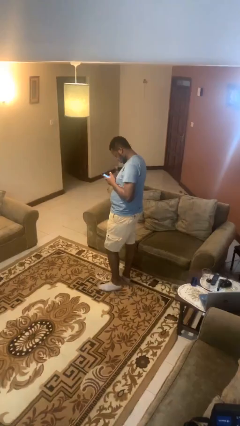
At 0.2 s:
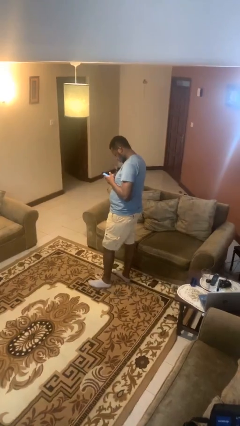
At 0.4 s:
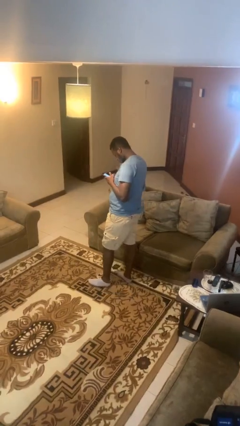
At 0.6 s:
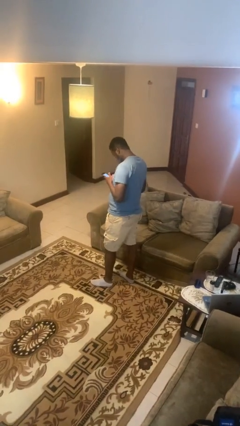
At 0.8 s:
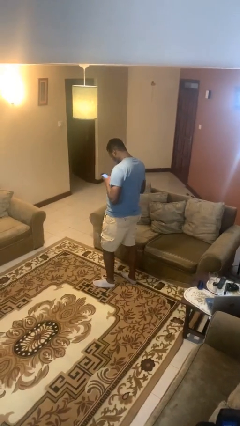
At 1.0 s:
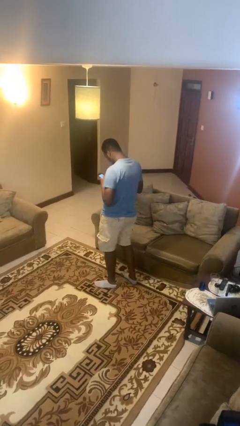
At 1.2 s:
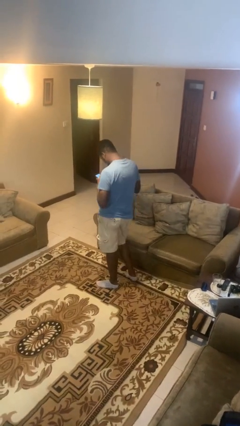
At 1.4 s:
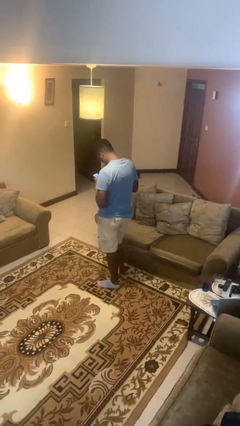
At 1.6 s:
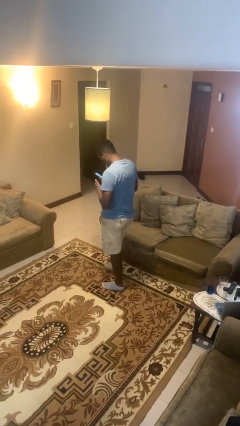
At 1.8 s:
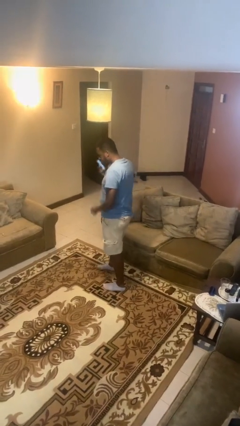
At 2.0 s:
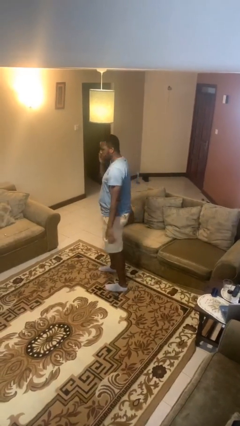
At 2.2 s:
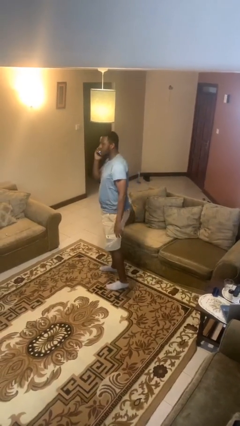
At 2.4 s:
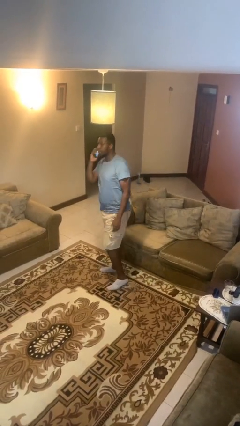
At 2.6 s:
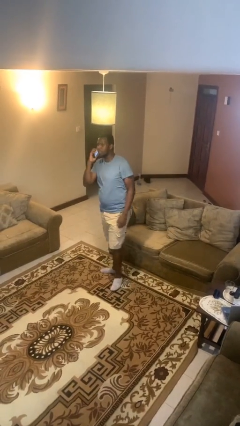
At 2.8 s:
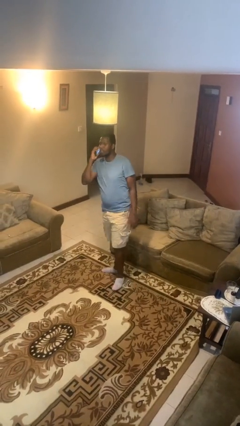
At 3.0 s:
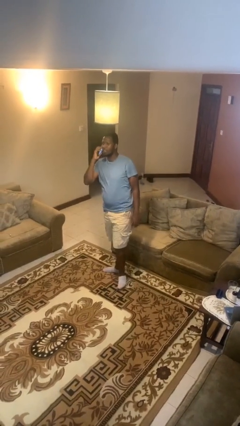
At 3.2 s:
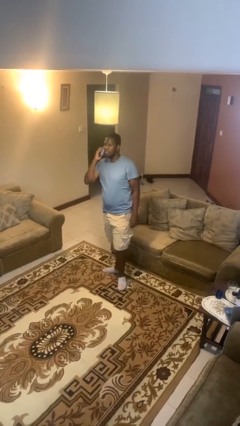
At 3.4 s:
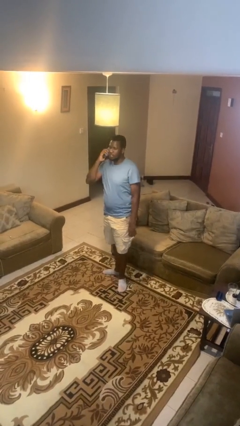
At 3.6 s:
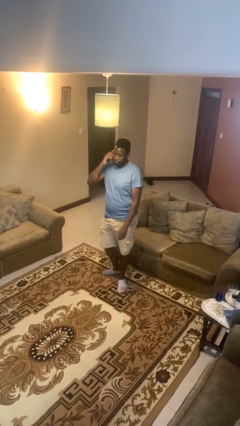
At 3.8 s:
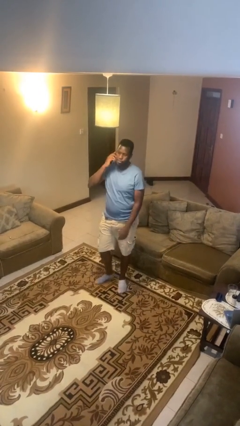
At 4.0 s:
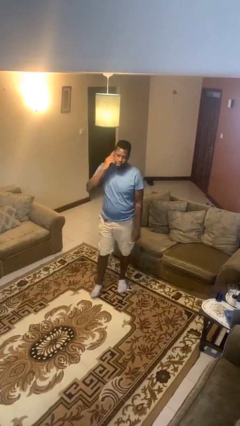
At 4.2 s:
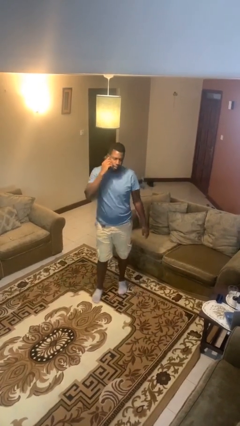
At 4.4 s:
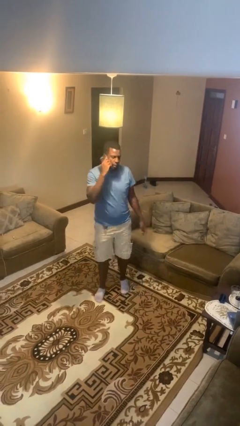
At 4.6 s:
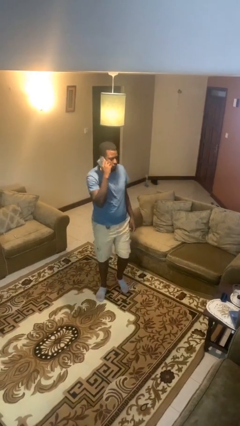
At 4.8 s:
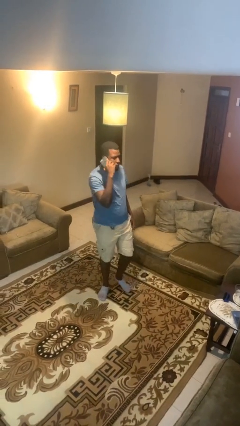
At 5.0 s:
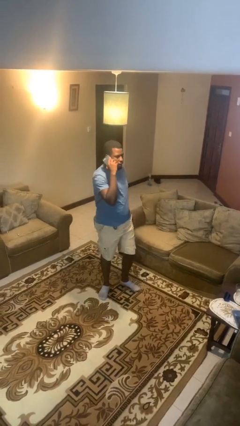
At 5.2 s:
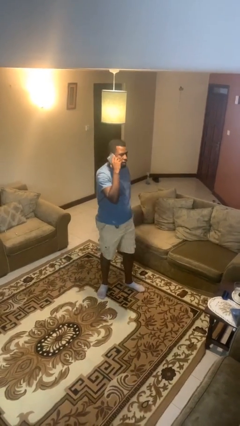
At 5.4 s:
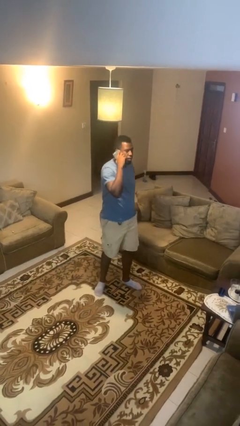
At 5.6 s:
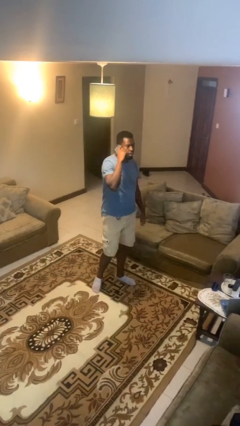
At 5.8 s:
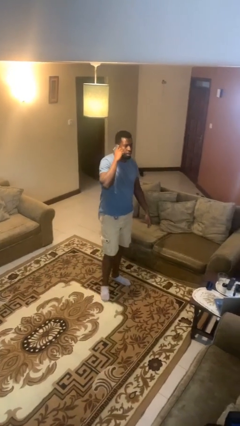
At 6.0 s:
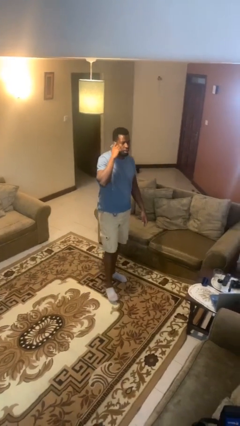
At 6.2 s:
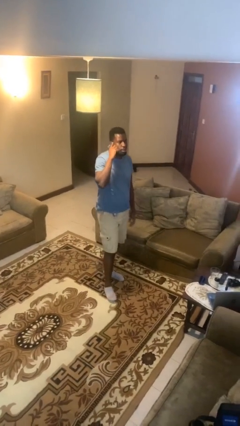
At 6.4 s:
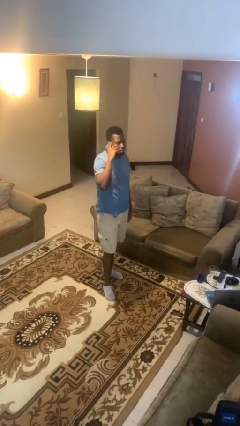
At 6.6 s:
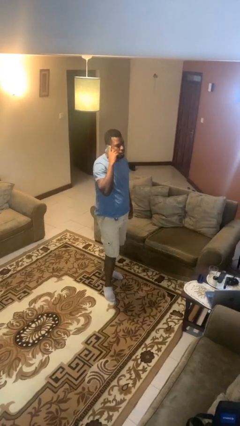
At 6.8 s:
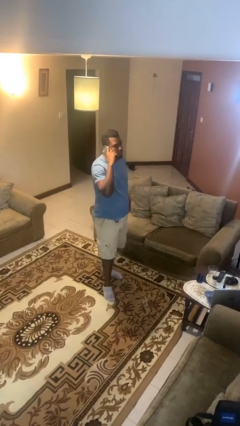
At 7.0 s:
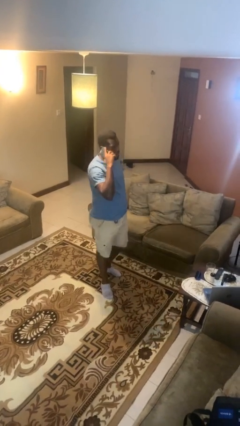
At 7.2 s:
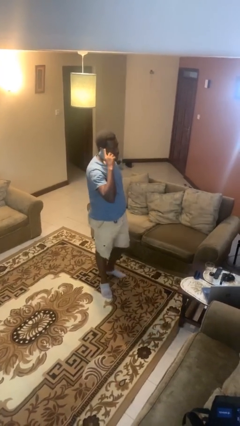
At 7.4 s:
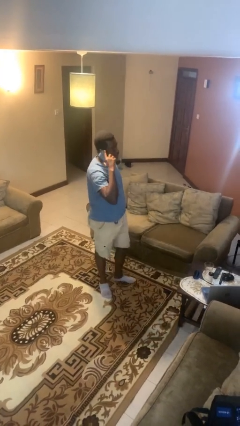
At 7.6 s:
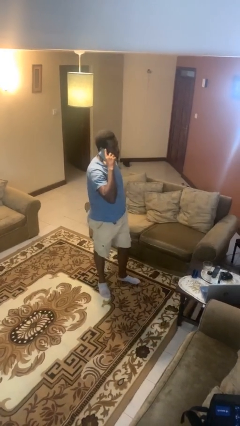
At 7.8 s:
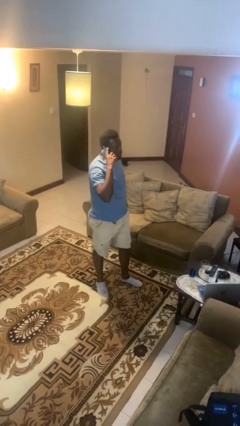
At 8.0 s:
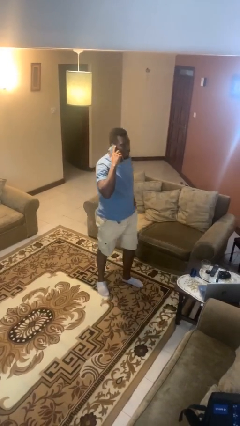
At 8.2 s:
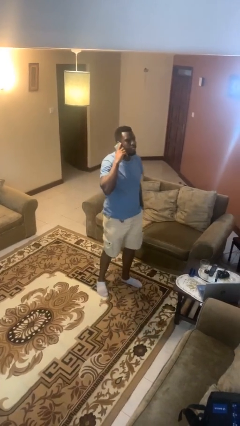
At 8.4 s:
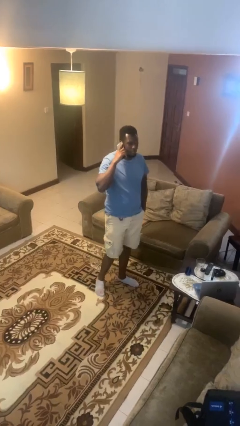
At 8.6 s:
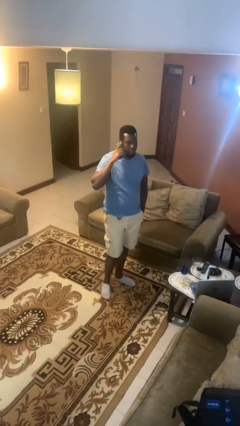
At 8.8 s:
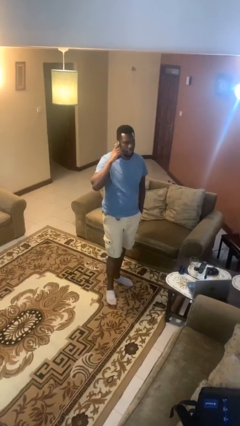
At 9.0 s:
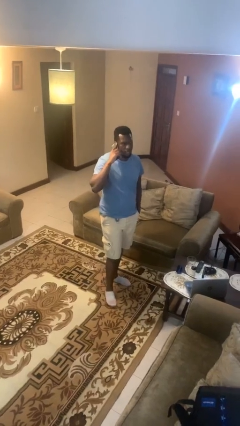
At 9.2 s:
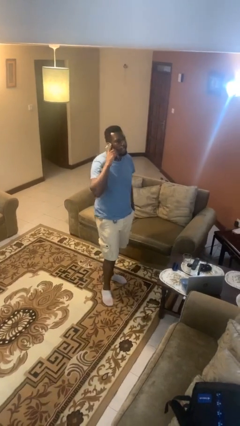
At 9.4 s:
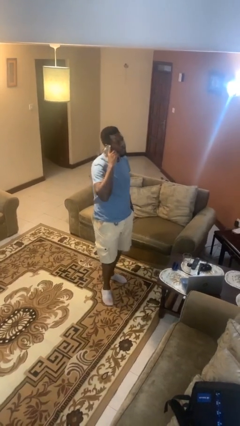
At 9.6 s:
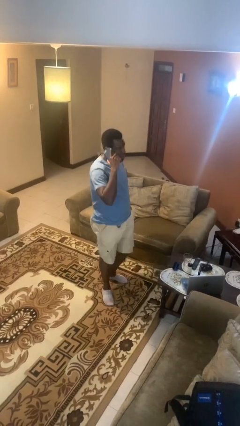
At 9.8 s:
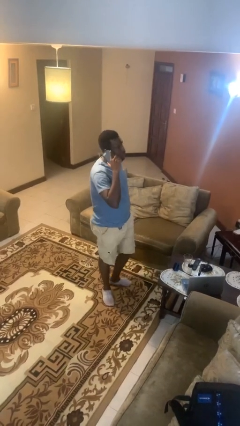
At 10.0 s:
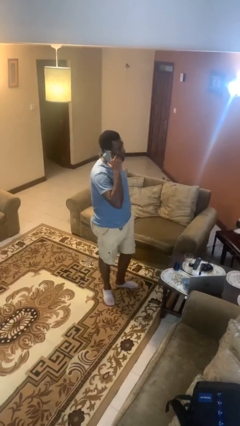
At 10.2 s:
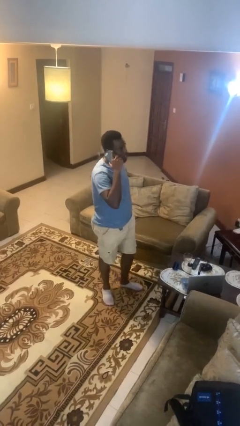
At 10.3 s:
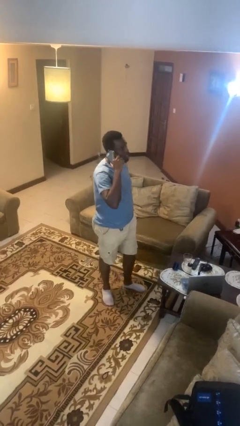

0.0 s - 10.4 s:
person talks on phone

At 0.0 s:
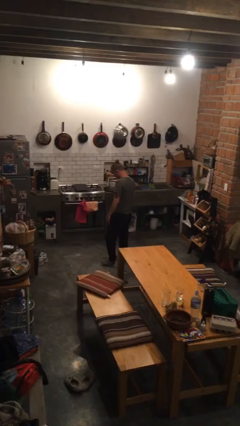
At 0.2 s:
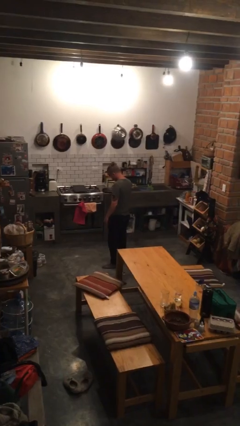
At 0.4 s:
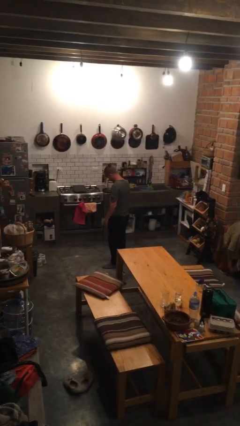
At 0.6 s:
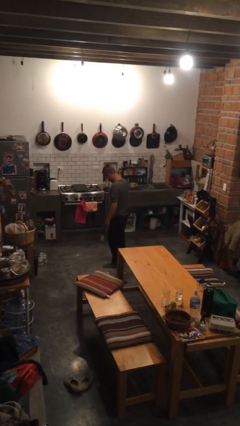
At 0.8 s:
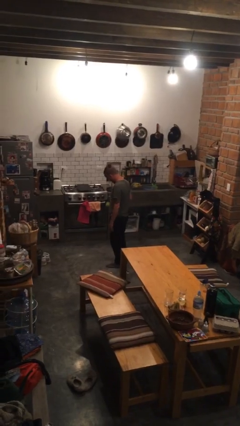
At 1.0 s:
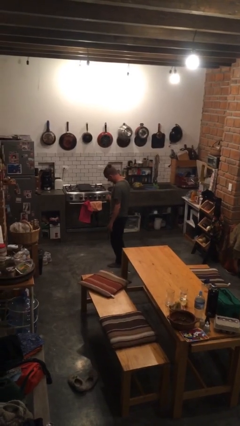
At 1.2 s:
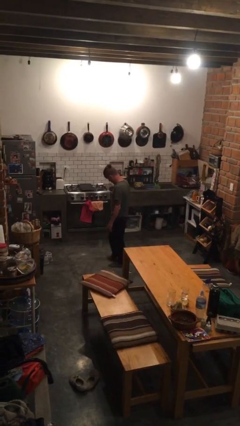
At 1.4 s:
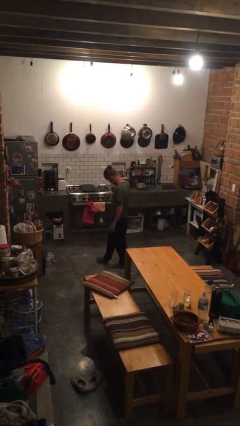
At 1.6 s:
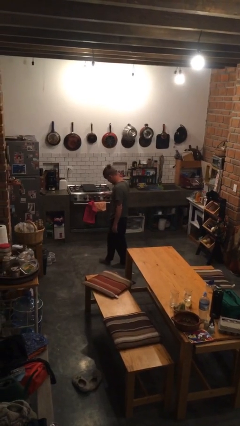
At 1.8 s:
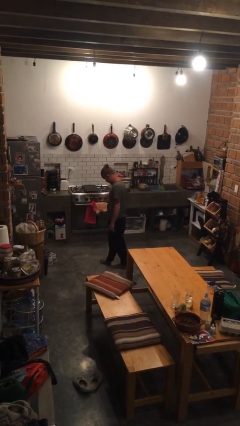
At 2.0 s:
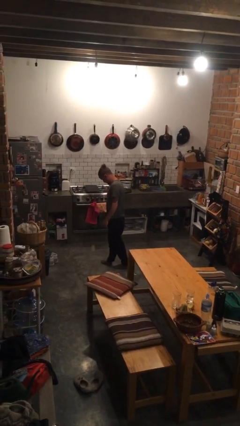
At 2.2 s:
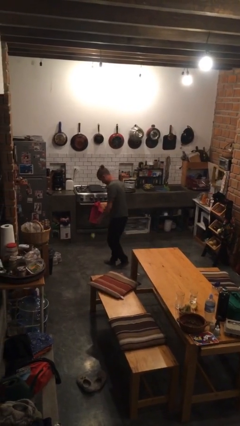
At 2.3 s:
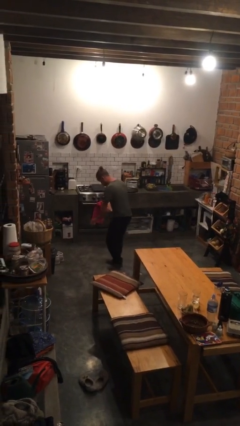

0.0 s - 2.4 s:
person bounces ball on floor

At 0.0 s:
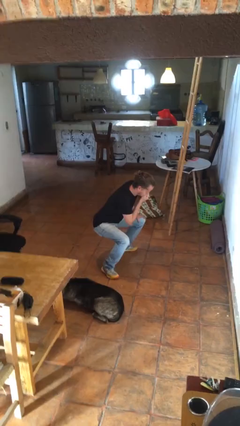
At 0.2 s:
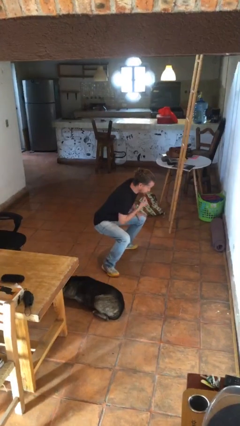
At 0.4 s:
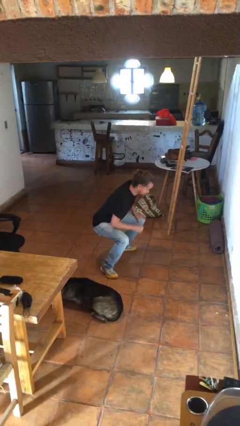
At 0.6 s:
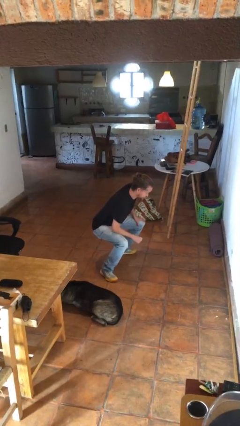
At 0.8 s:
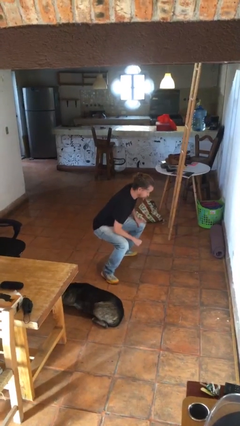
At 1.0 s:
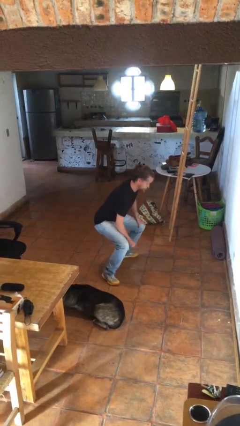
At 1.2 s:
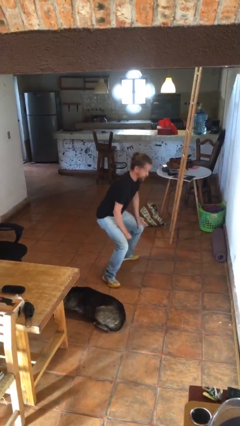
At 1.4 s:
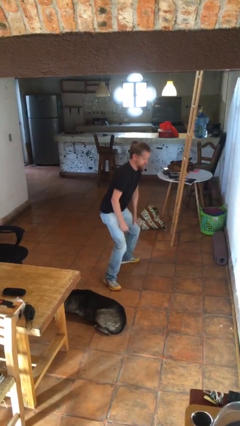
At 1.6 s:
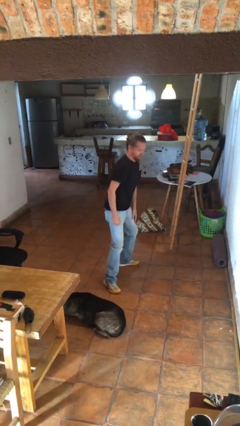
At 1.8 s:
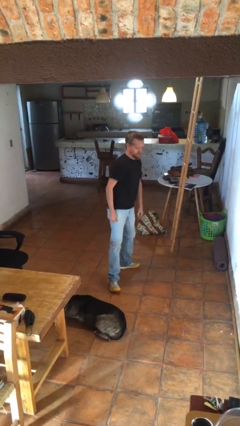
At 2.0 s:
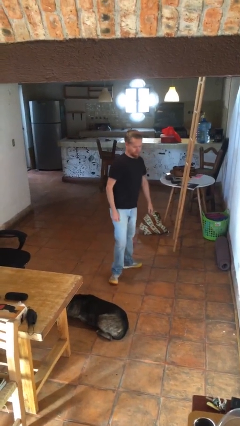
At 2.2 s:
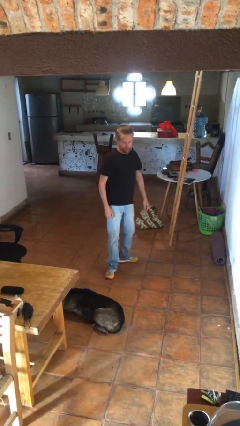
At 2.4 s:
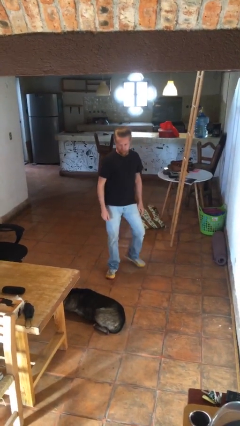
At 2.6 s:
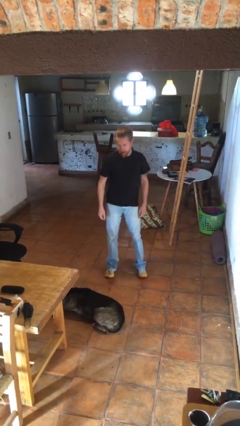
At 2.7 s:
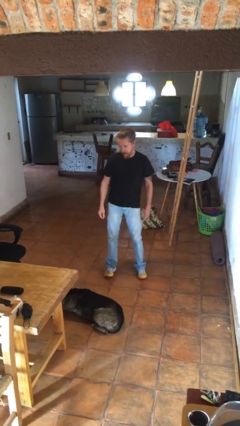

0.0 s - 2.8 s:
person stands up

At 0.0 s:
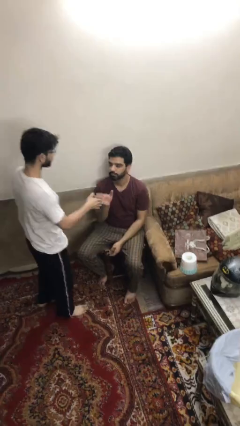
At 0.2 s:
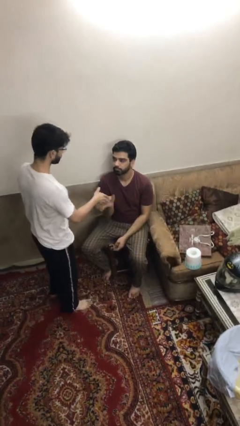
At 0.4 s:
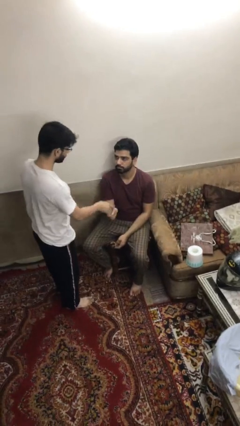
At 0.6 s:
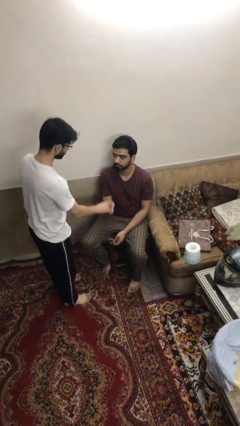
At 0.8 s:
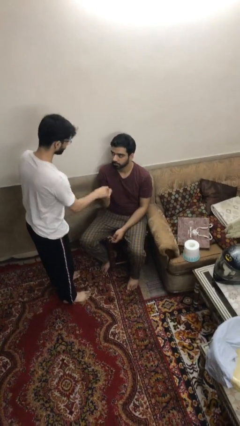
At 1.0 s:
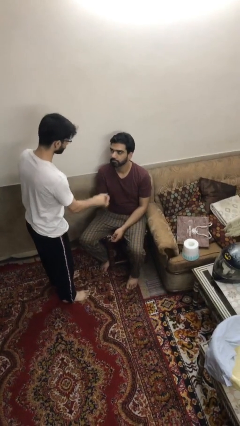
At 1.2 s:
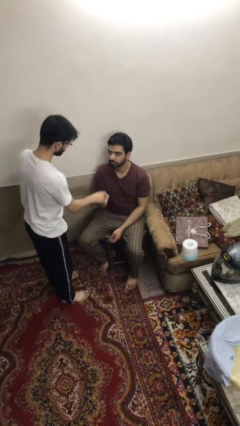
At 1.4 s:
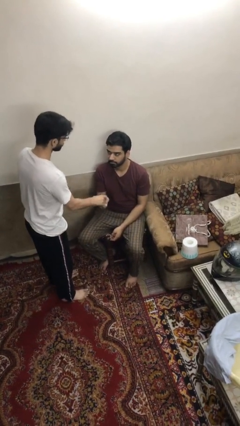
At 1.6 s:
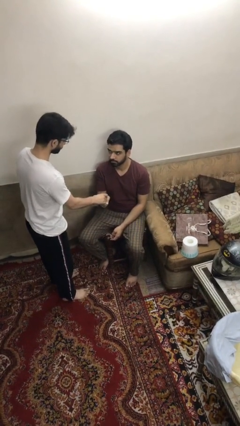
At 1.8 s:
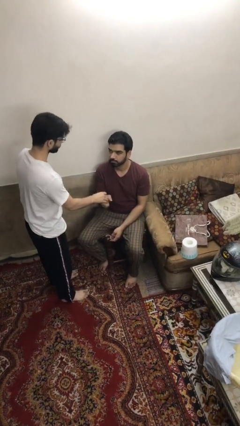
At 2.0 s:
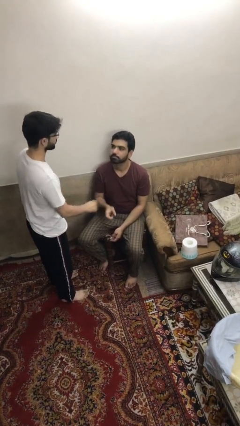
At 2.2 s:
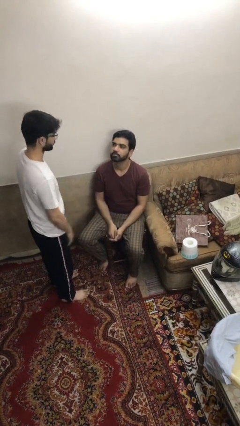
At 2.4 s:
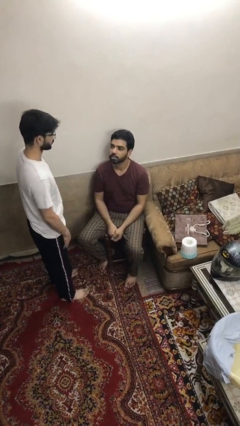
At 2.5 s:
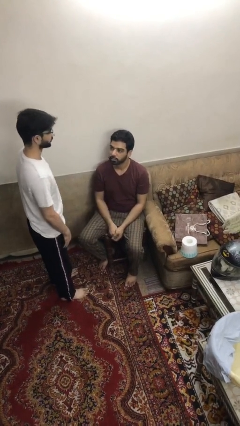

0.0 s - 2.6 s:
person shakes hand
